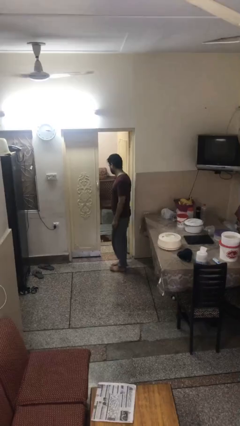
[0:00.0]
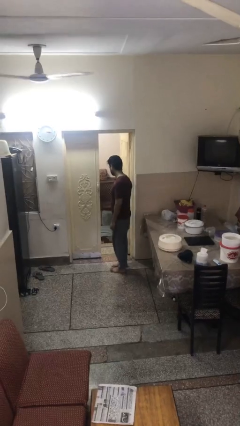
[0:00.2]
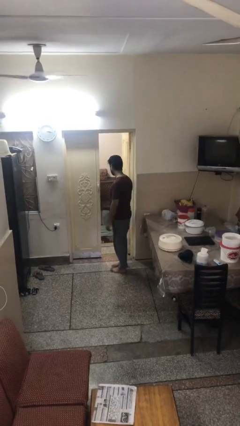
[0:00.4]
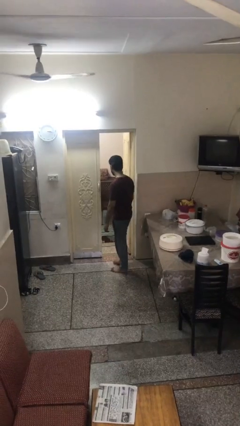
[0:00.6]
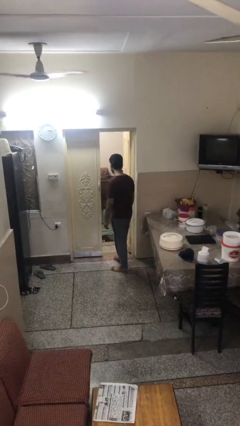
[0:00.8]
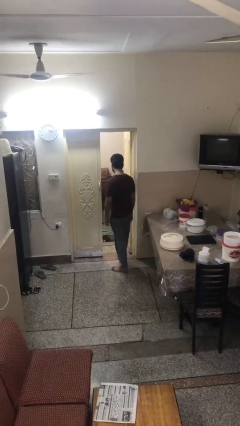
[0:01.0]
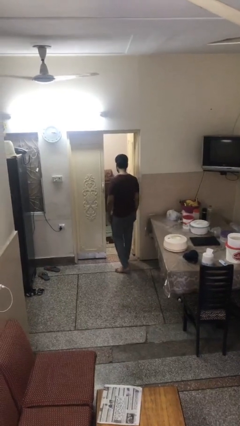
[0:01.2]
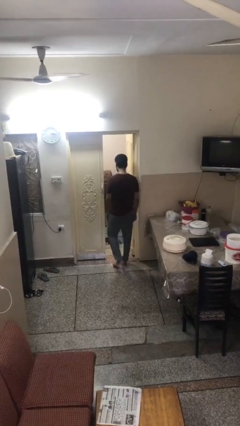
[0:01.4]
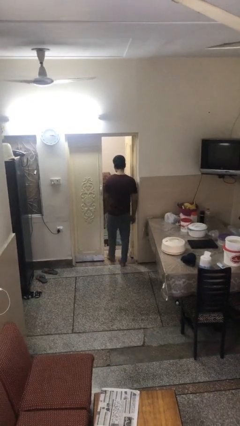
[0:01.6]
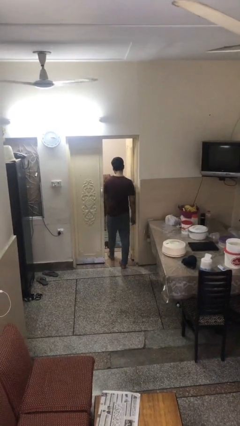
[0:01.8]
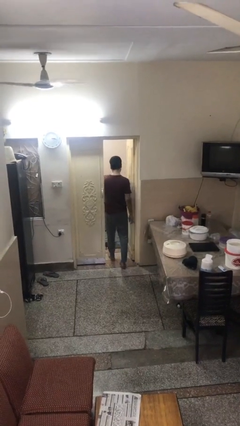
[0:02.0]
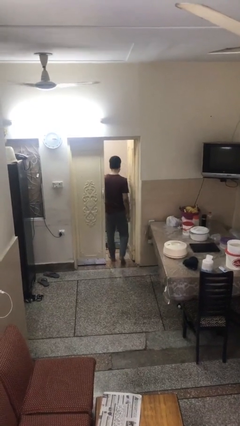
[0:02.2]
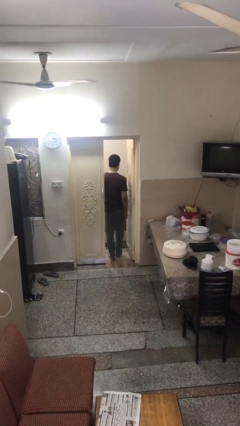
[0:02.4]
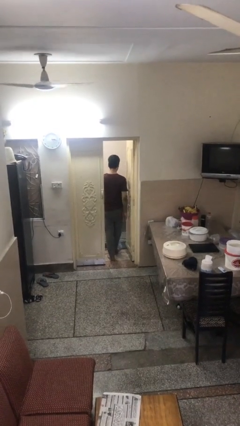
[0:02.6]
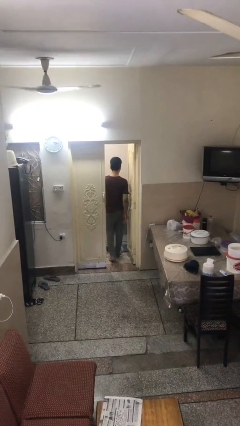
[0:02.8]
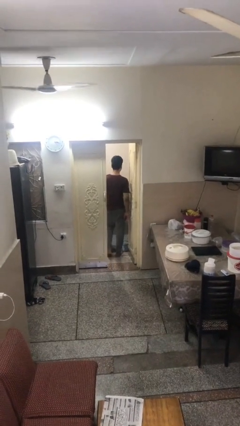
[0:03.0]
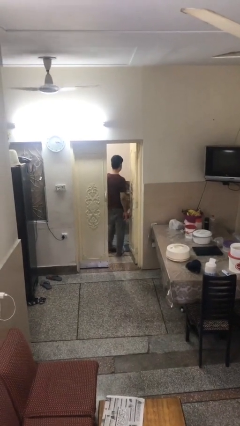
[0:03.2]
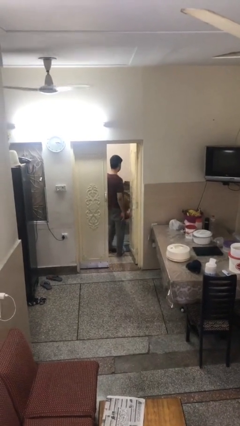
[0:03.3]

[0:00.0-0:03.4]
person exits scene through structure

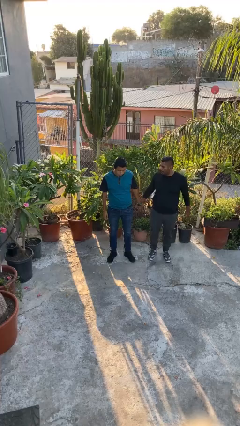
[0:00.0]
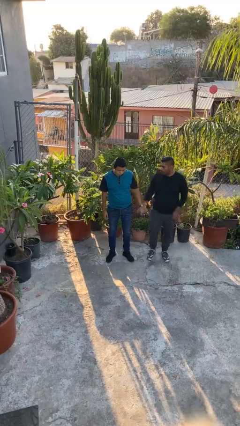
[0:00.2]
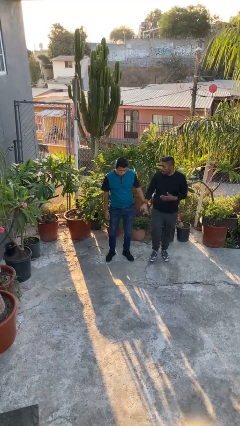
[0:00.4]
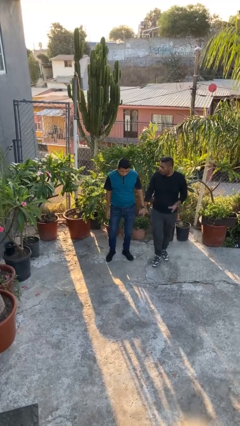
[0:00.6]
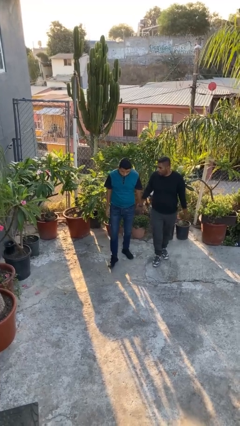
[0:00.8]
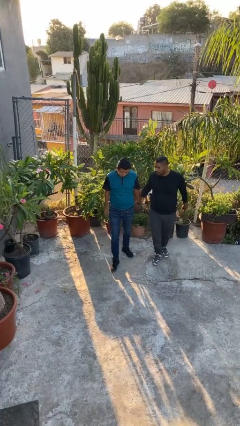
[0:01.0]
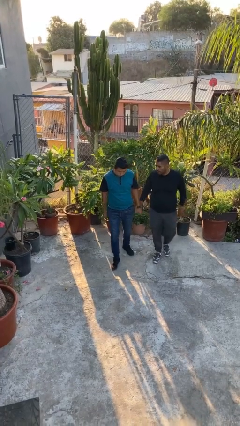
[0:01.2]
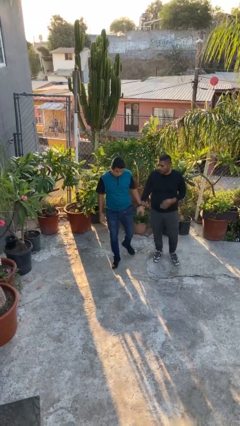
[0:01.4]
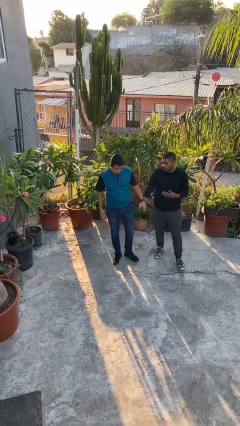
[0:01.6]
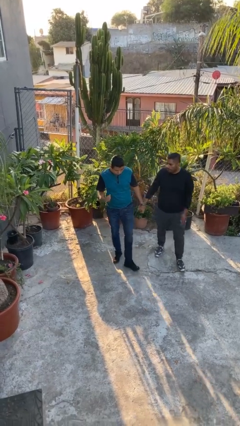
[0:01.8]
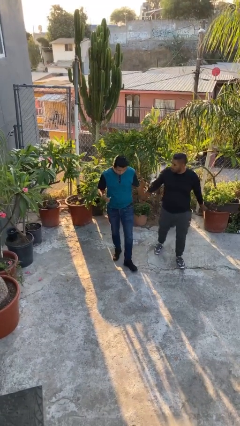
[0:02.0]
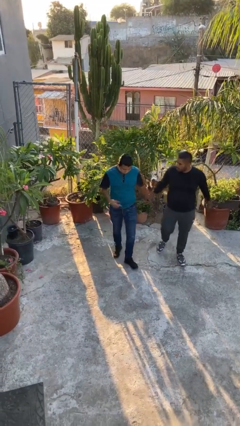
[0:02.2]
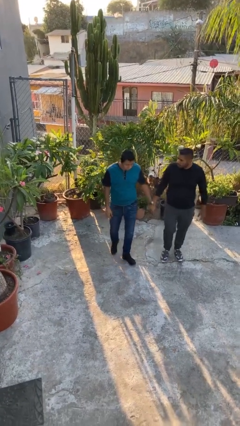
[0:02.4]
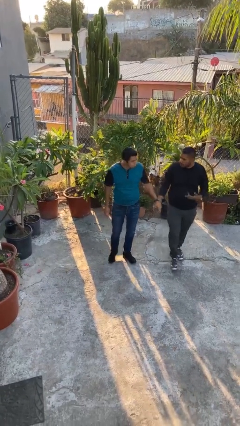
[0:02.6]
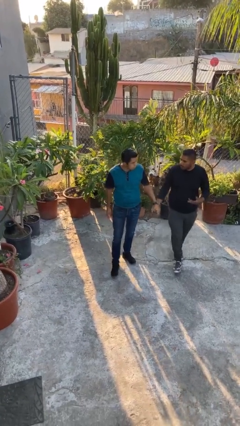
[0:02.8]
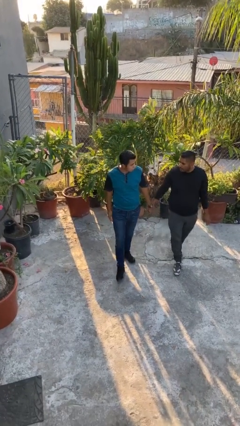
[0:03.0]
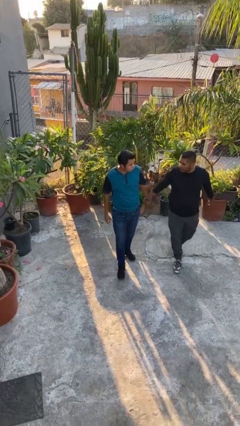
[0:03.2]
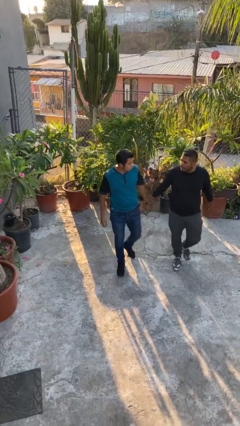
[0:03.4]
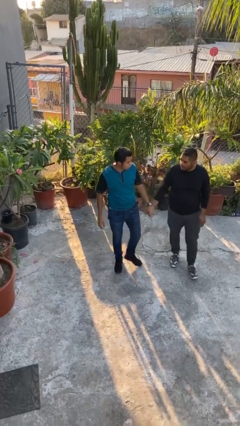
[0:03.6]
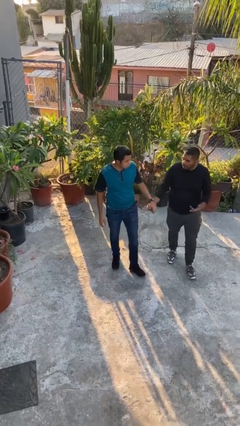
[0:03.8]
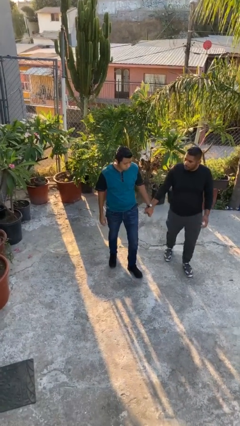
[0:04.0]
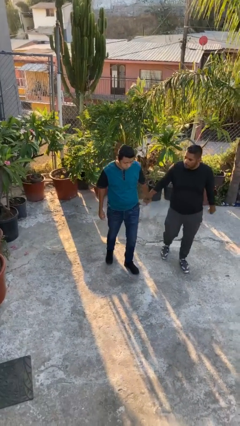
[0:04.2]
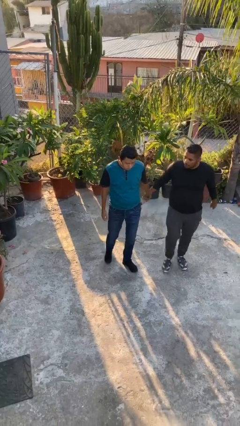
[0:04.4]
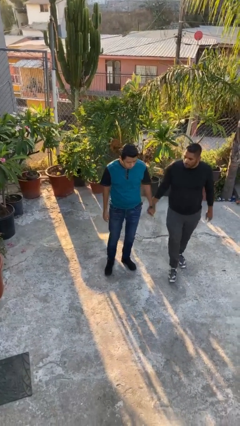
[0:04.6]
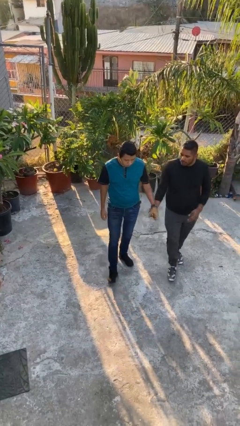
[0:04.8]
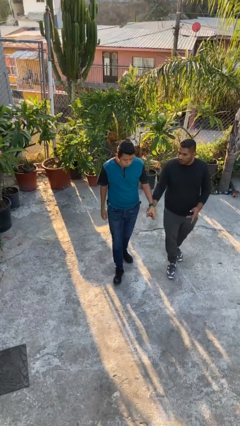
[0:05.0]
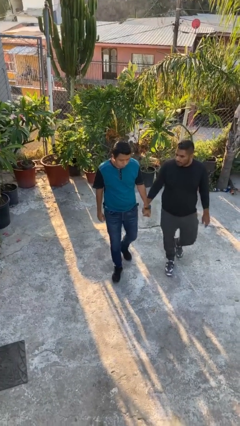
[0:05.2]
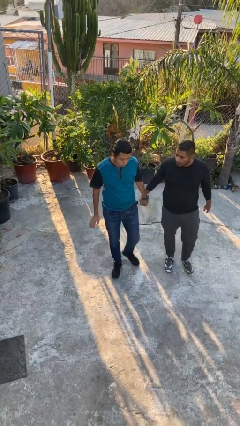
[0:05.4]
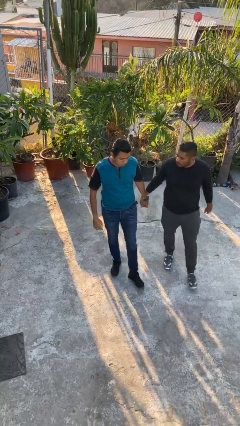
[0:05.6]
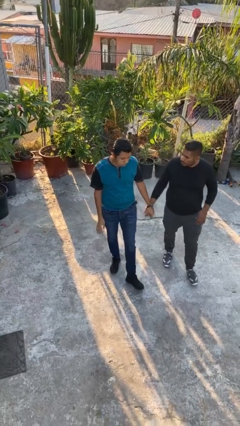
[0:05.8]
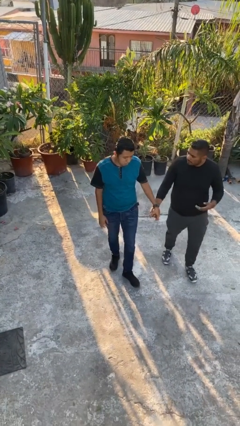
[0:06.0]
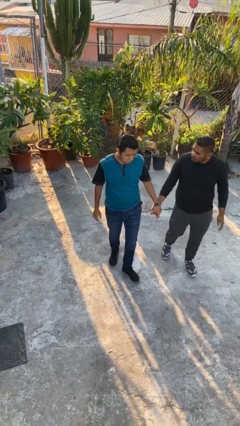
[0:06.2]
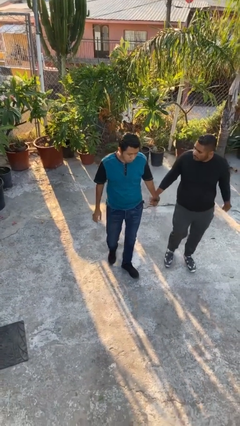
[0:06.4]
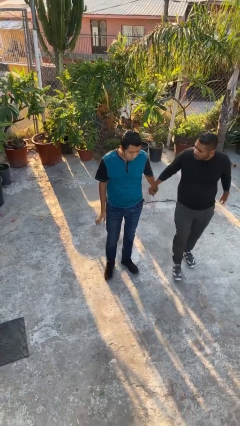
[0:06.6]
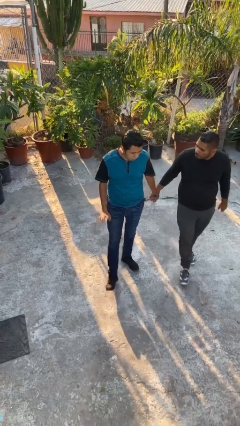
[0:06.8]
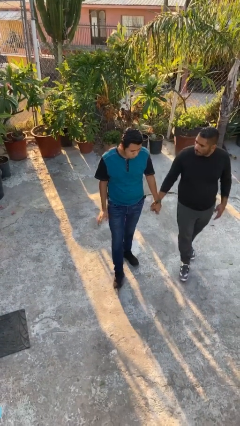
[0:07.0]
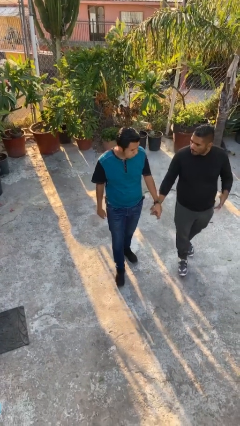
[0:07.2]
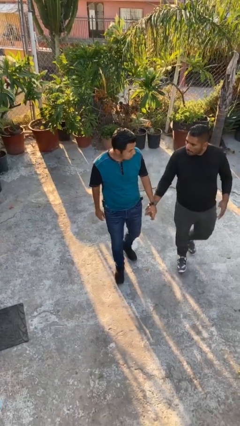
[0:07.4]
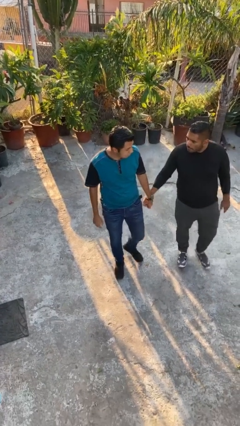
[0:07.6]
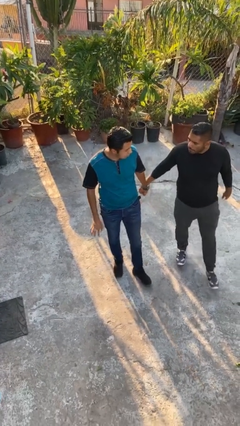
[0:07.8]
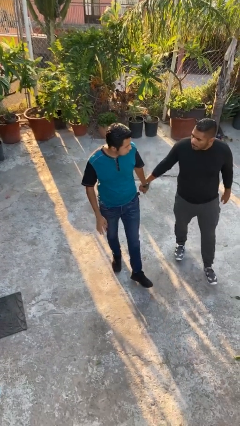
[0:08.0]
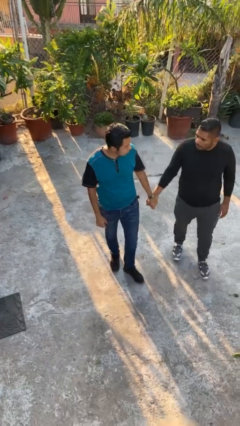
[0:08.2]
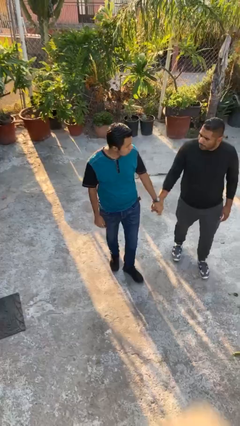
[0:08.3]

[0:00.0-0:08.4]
person holds hand

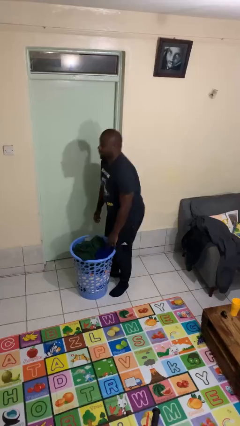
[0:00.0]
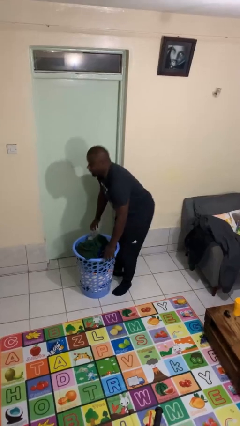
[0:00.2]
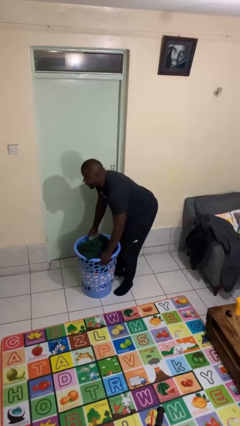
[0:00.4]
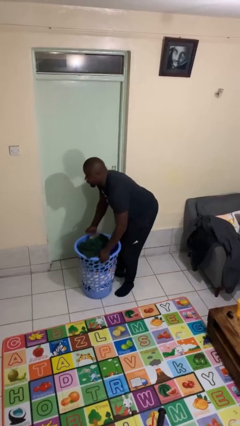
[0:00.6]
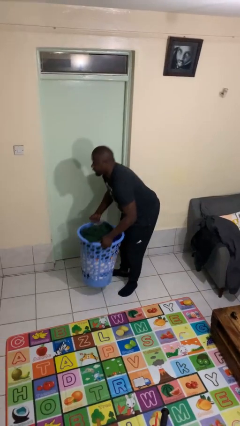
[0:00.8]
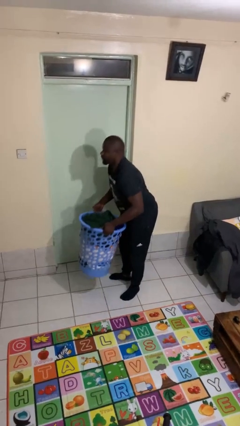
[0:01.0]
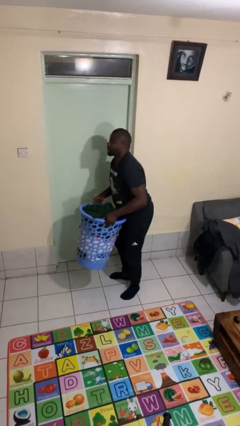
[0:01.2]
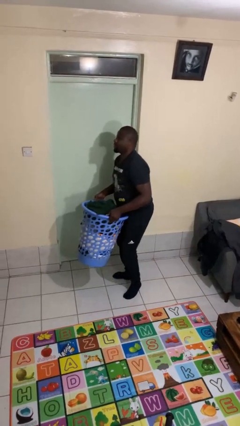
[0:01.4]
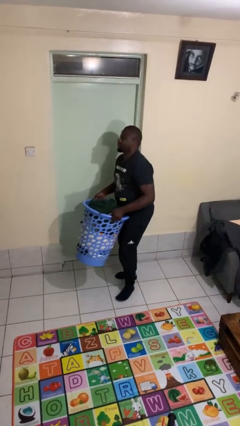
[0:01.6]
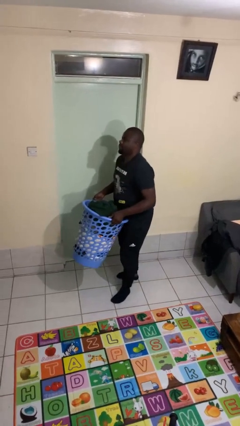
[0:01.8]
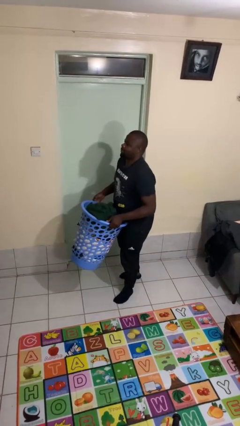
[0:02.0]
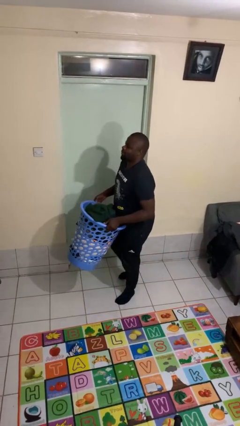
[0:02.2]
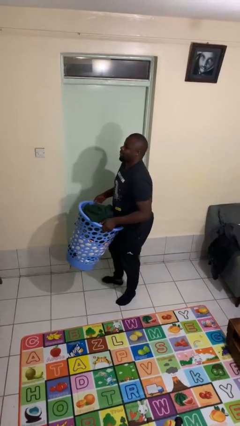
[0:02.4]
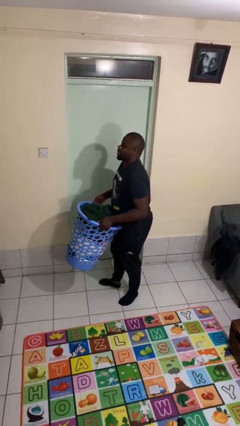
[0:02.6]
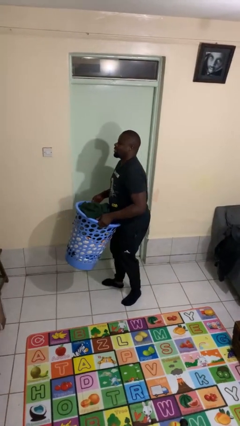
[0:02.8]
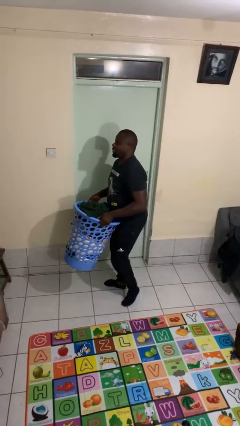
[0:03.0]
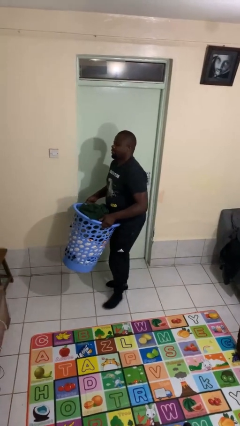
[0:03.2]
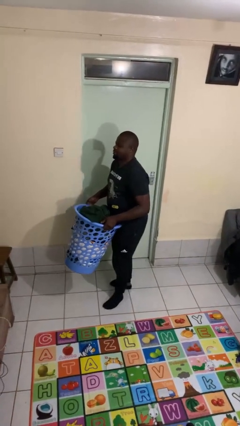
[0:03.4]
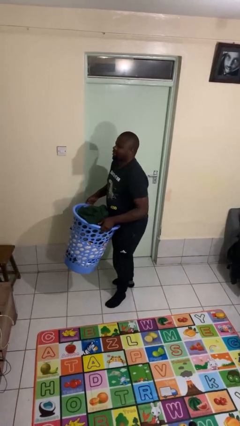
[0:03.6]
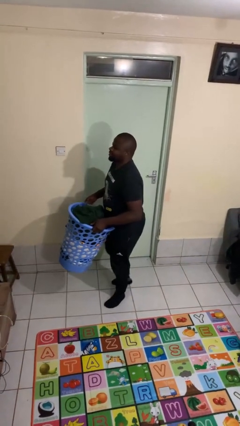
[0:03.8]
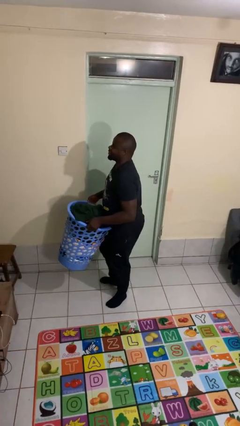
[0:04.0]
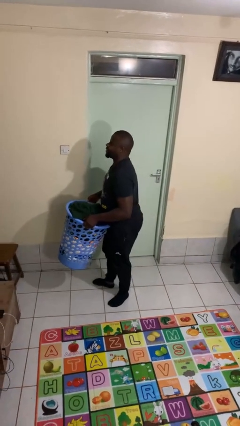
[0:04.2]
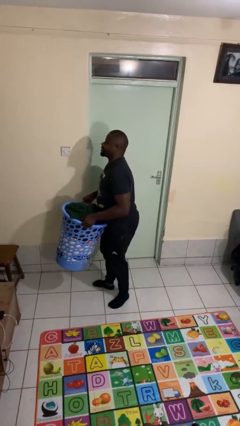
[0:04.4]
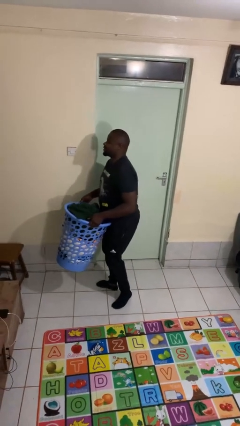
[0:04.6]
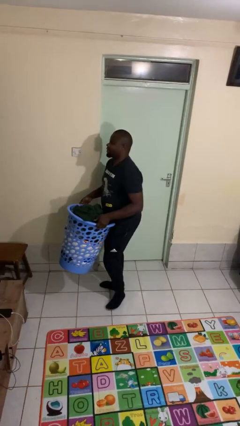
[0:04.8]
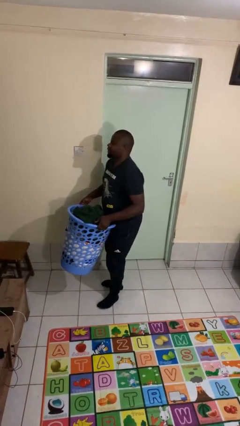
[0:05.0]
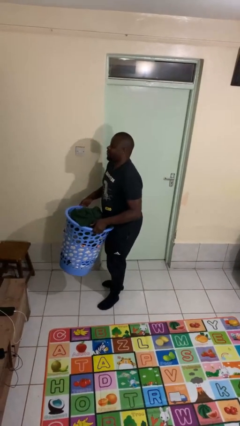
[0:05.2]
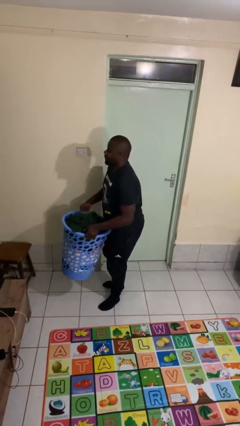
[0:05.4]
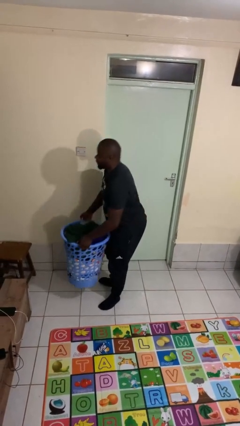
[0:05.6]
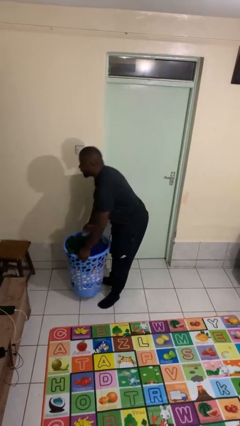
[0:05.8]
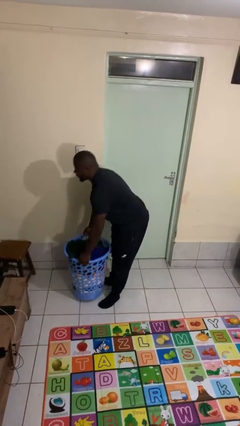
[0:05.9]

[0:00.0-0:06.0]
person carries laundry basket
